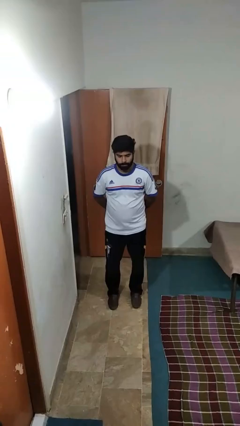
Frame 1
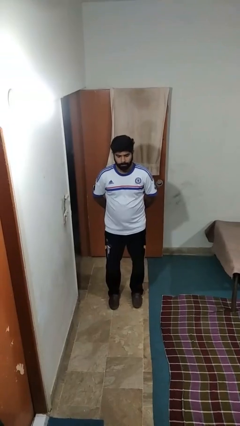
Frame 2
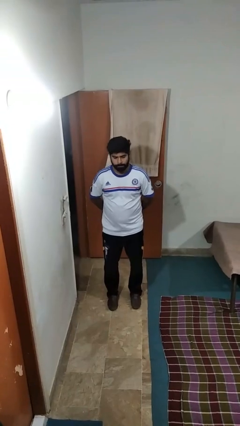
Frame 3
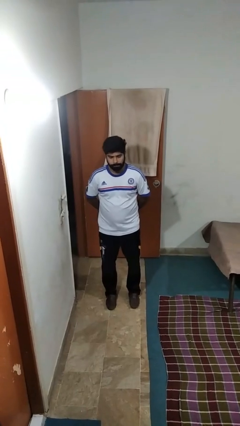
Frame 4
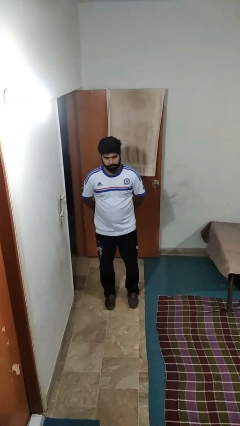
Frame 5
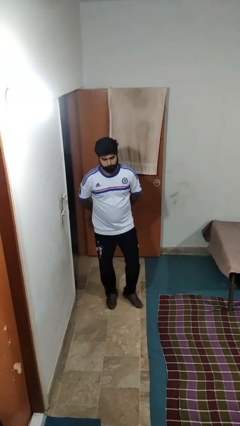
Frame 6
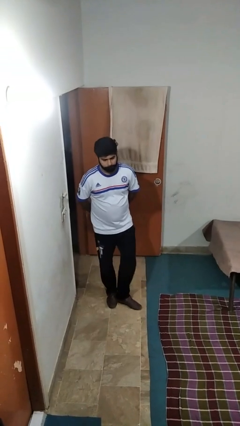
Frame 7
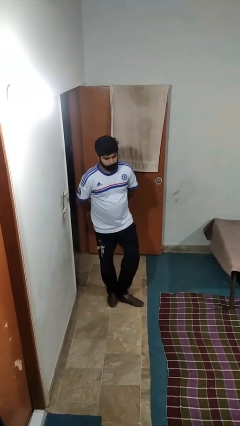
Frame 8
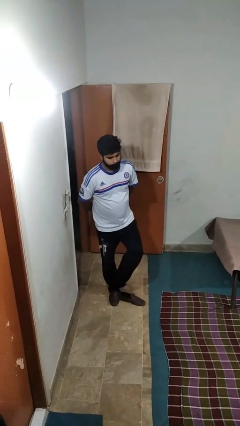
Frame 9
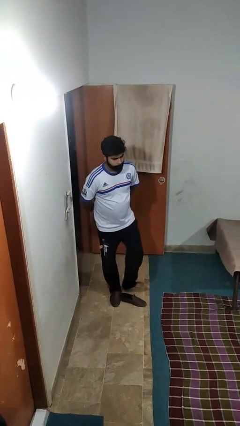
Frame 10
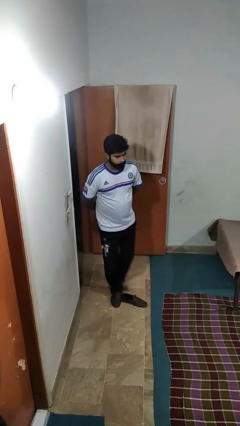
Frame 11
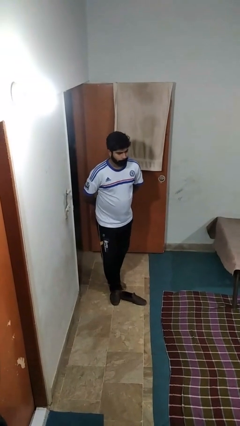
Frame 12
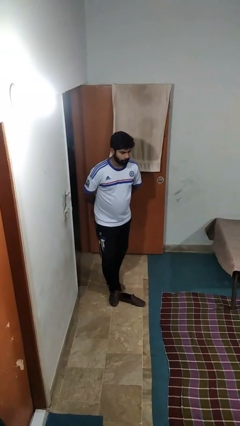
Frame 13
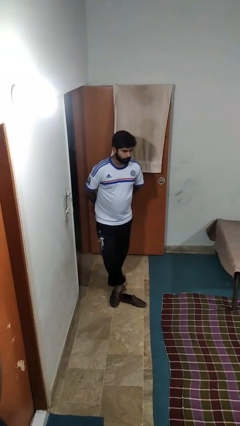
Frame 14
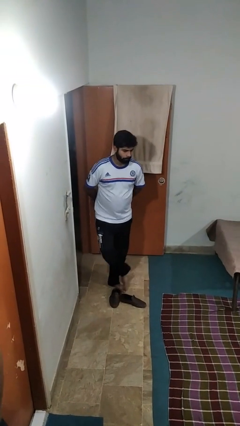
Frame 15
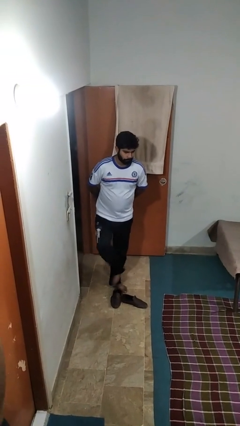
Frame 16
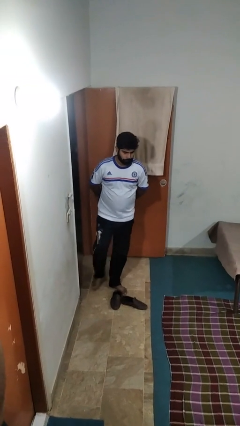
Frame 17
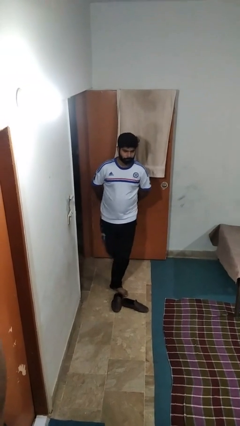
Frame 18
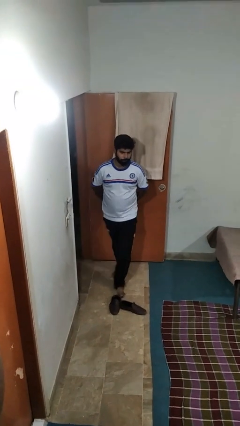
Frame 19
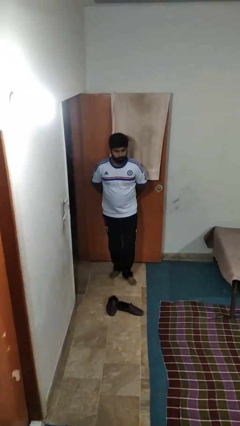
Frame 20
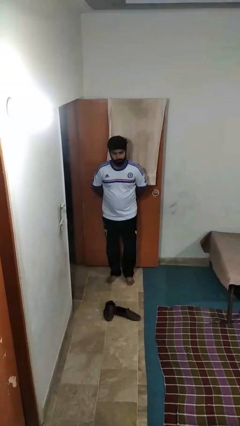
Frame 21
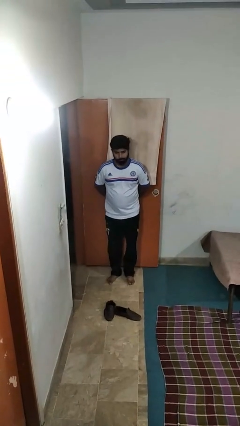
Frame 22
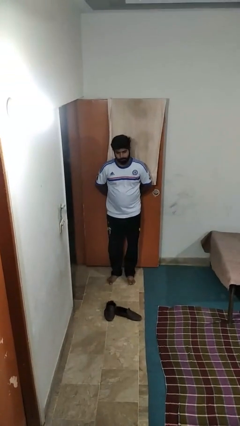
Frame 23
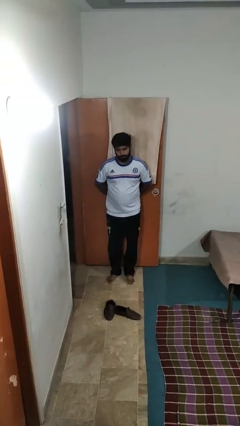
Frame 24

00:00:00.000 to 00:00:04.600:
person takes off shoes

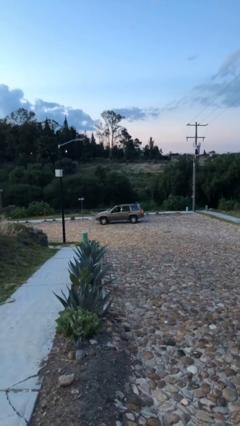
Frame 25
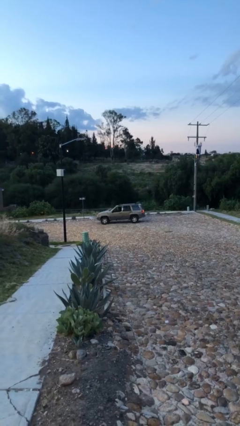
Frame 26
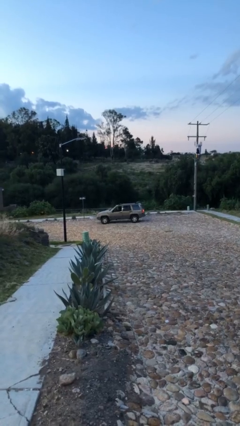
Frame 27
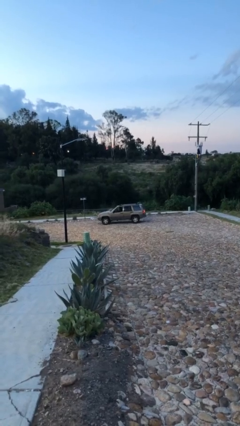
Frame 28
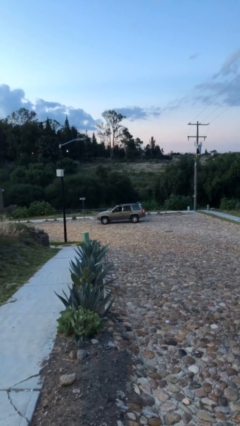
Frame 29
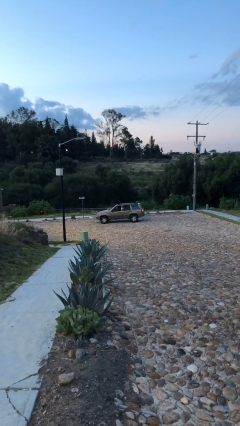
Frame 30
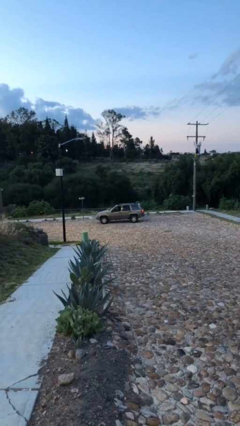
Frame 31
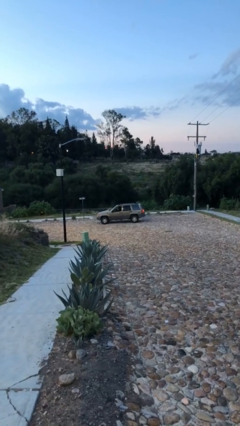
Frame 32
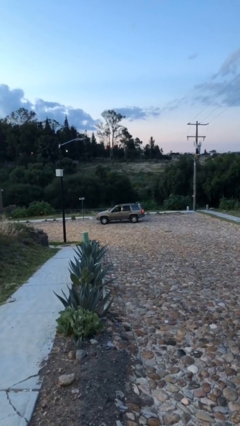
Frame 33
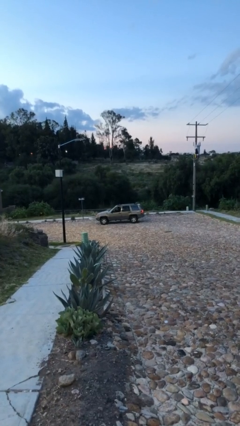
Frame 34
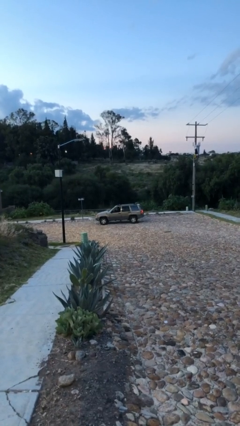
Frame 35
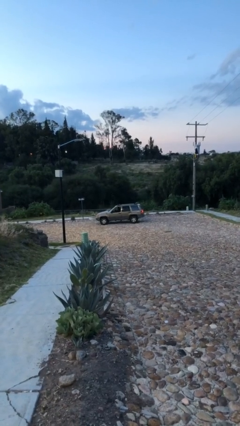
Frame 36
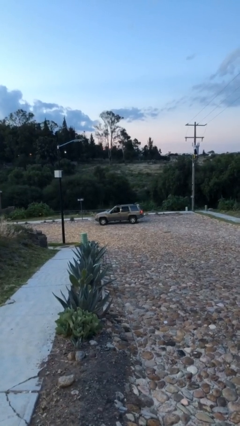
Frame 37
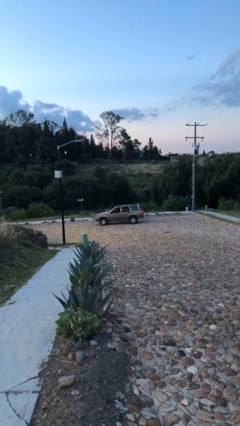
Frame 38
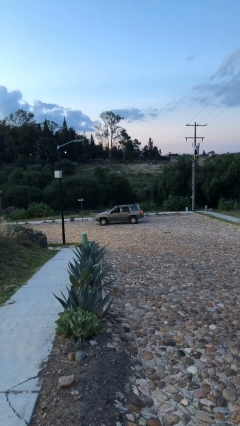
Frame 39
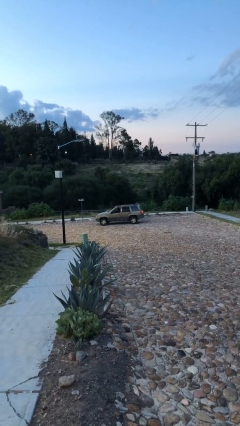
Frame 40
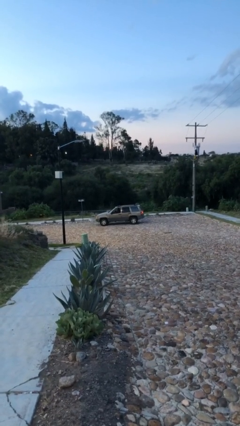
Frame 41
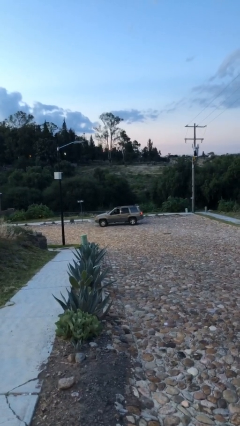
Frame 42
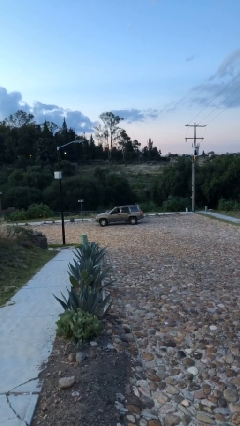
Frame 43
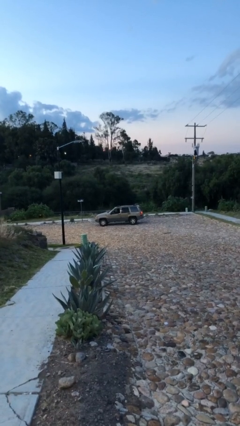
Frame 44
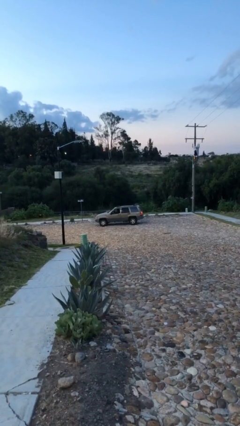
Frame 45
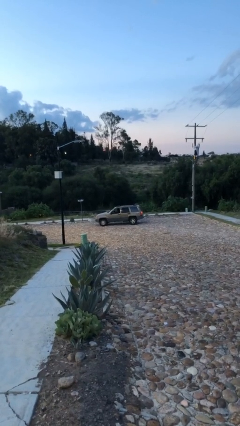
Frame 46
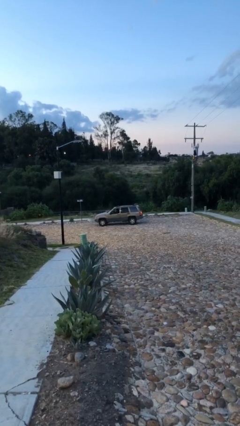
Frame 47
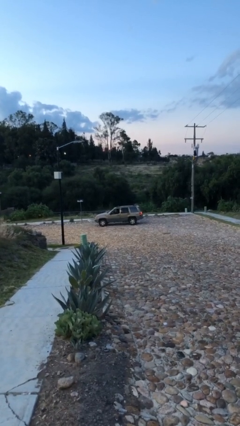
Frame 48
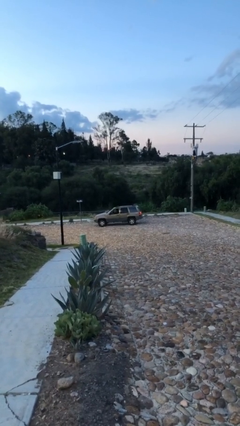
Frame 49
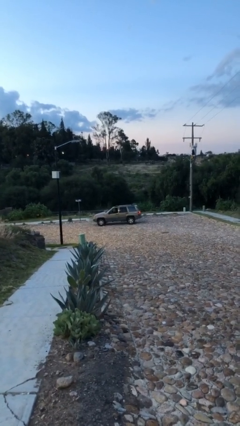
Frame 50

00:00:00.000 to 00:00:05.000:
car drops off person

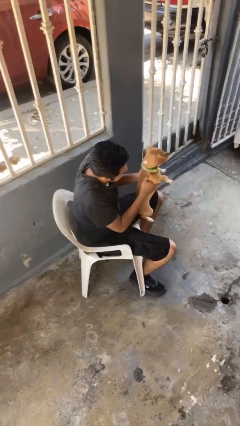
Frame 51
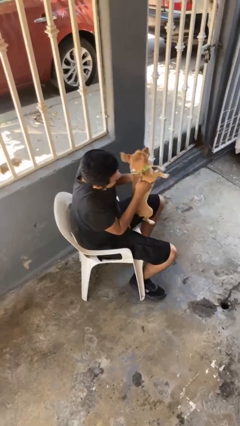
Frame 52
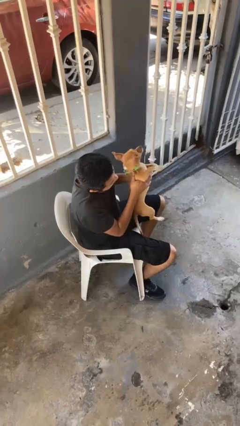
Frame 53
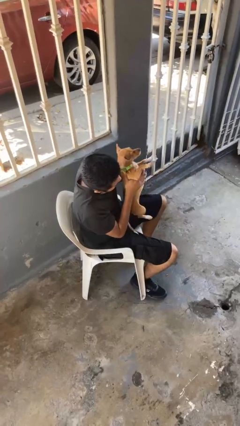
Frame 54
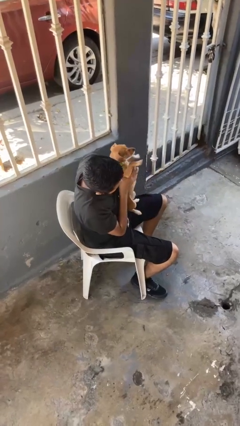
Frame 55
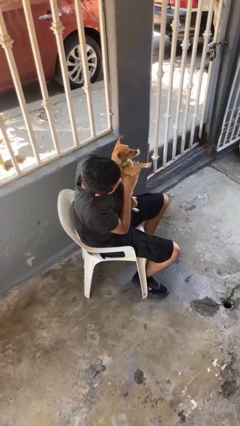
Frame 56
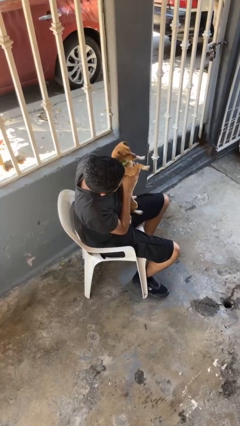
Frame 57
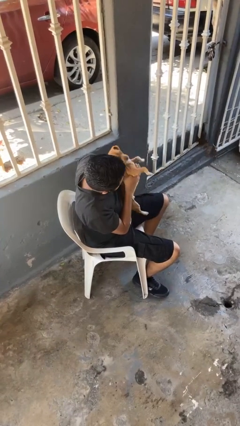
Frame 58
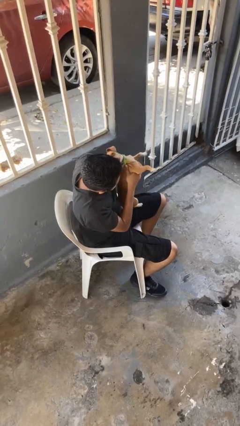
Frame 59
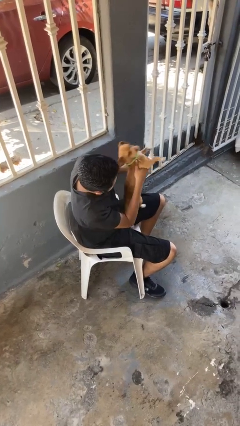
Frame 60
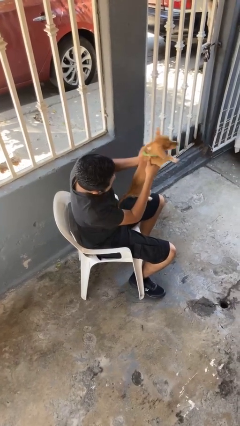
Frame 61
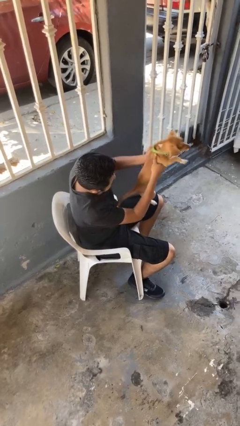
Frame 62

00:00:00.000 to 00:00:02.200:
person hugs dog

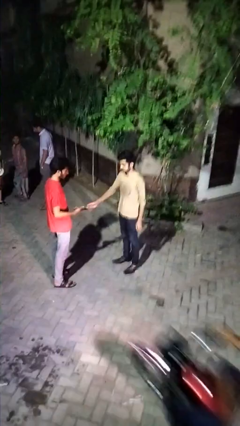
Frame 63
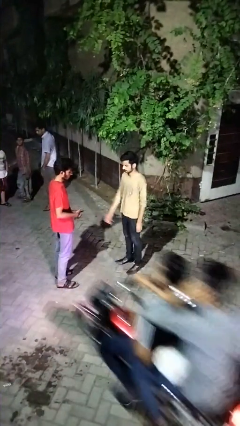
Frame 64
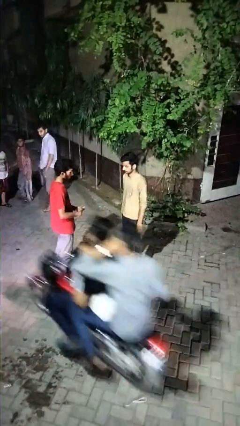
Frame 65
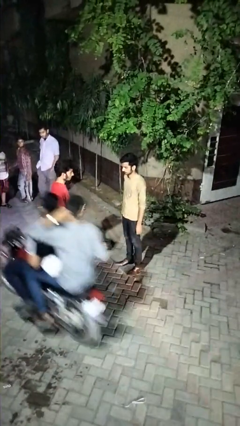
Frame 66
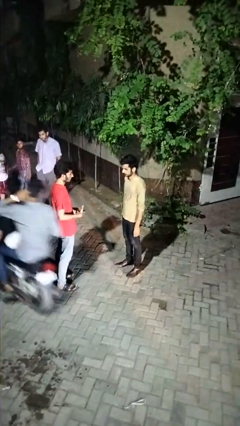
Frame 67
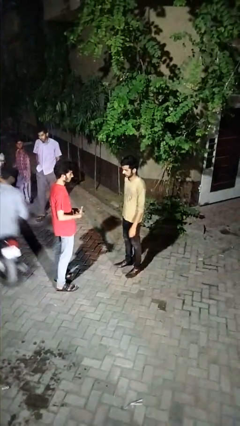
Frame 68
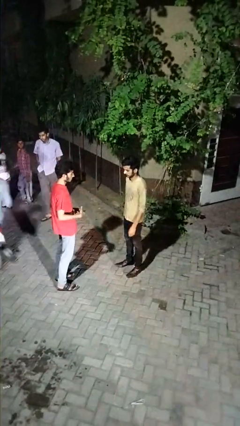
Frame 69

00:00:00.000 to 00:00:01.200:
person transfers object to person

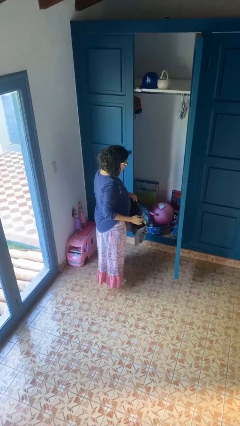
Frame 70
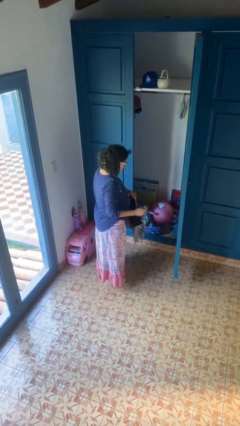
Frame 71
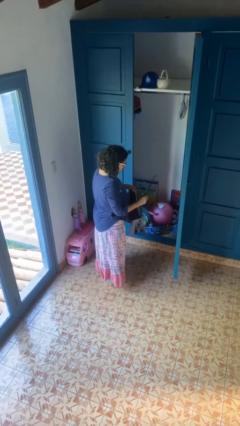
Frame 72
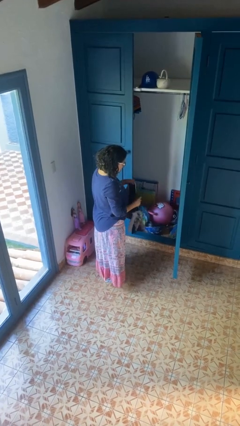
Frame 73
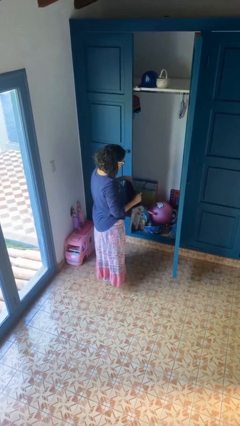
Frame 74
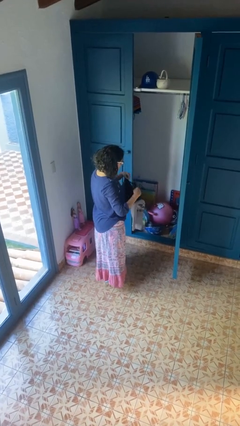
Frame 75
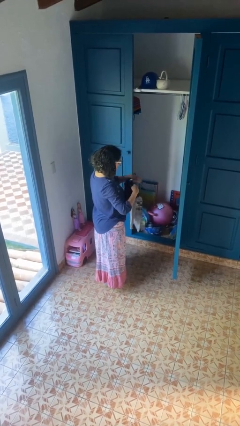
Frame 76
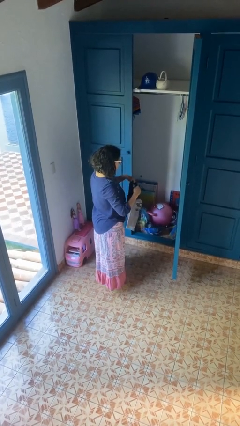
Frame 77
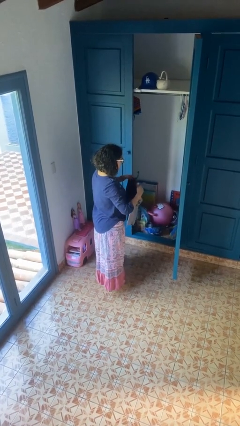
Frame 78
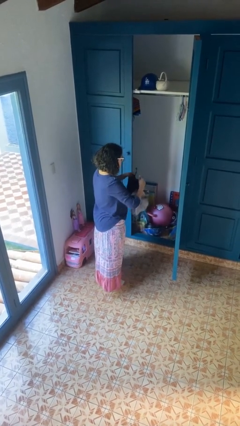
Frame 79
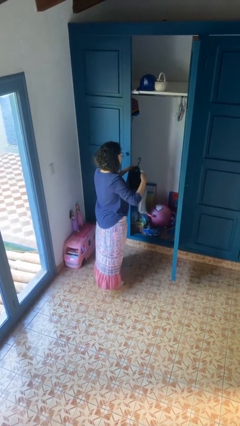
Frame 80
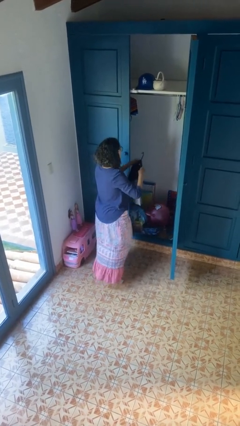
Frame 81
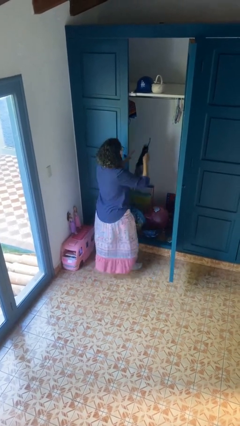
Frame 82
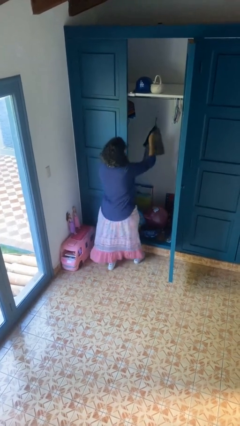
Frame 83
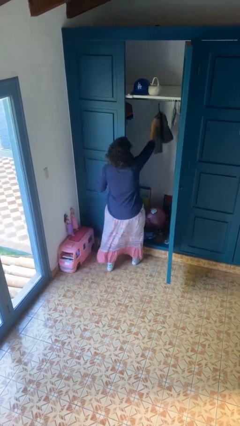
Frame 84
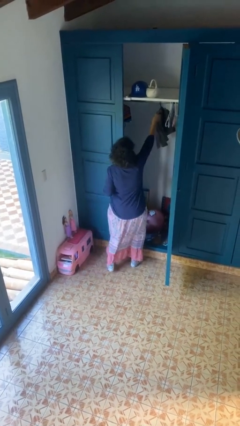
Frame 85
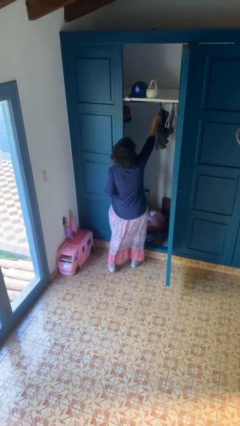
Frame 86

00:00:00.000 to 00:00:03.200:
person puts clothes into closet

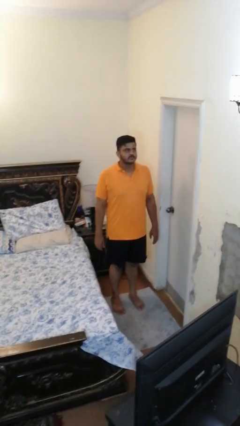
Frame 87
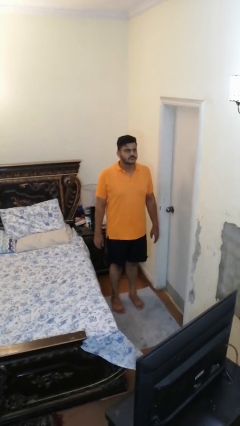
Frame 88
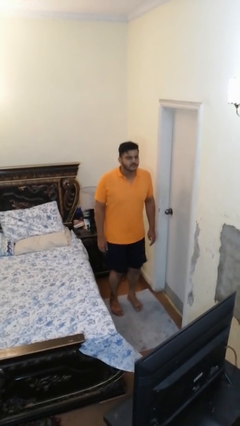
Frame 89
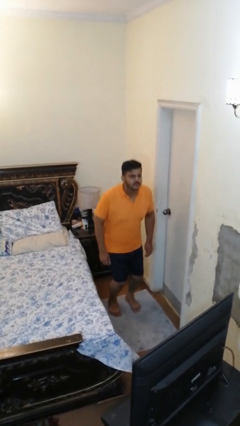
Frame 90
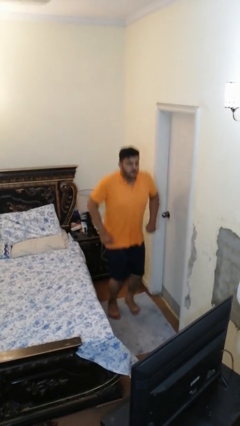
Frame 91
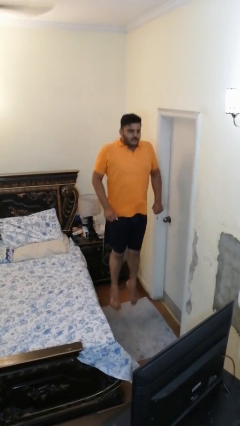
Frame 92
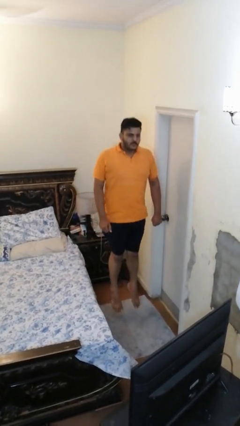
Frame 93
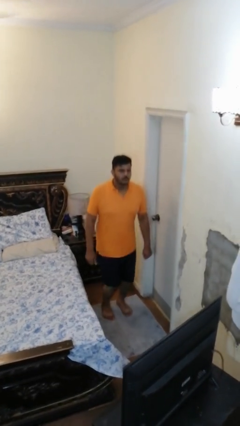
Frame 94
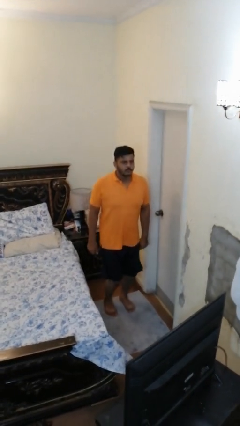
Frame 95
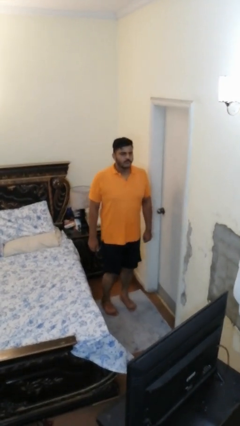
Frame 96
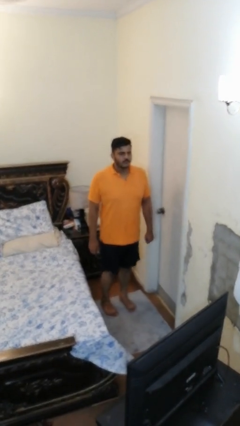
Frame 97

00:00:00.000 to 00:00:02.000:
person jumps
